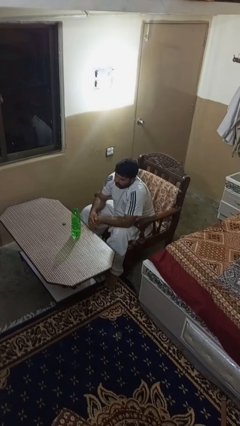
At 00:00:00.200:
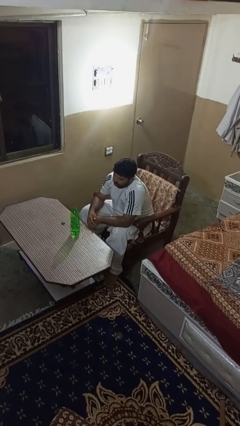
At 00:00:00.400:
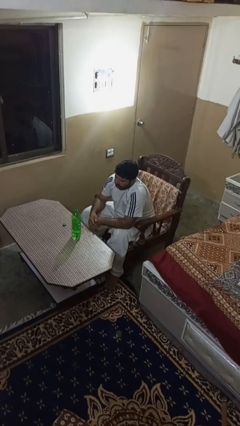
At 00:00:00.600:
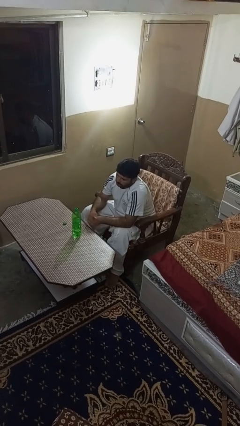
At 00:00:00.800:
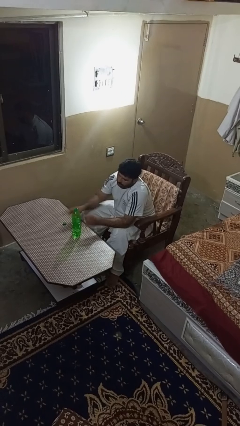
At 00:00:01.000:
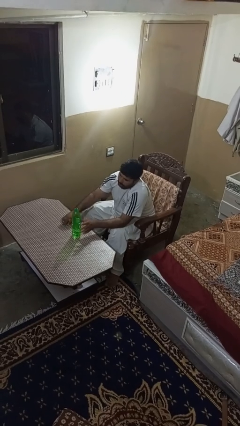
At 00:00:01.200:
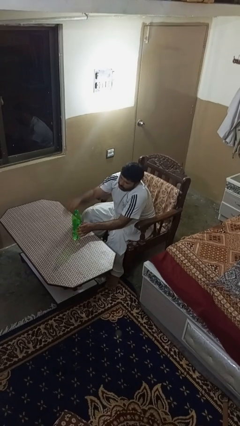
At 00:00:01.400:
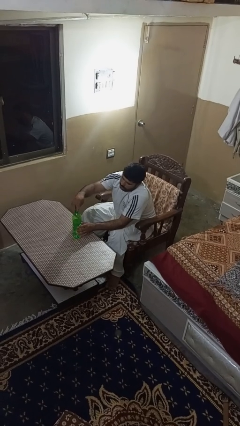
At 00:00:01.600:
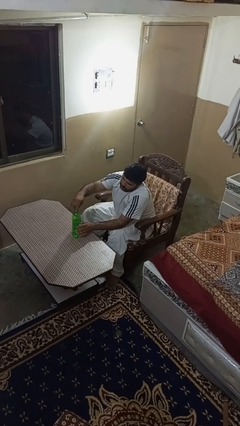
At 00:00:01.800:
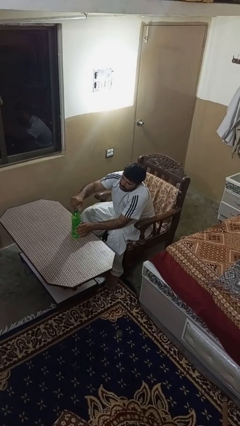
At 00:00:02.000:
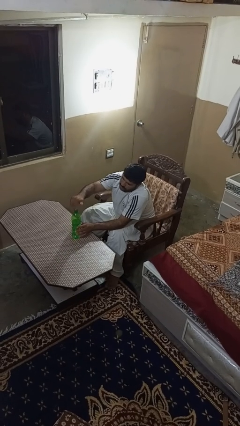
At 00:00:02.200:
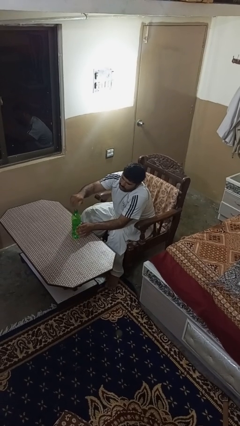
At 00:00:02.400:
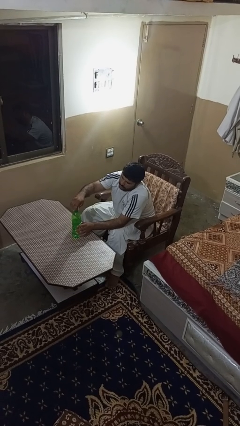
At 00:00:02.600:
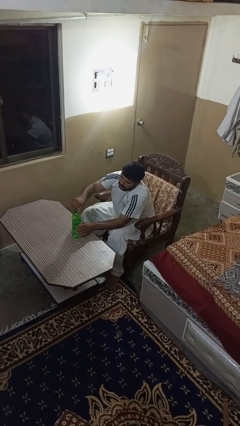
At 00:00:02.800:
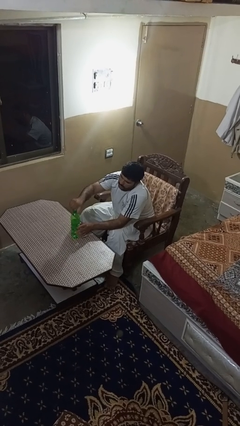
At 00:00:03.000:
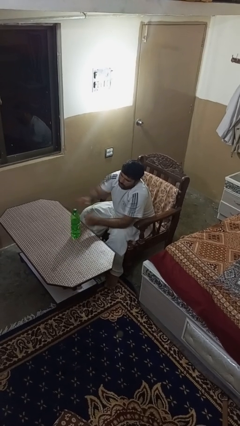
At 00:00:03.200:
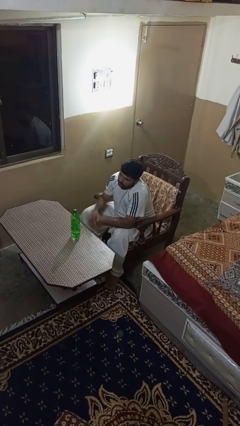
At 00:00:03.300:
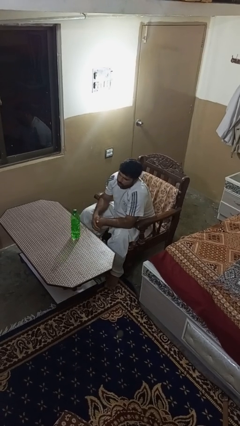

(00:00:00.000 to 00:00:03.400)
person screws lid to bottle

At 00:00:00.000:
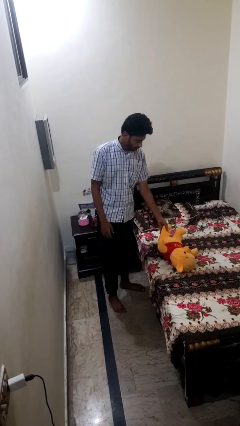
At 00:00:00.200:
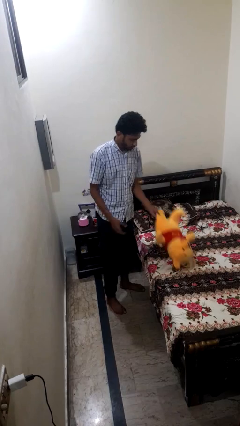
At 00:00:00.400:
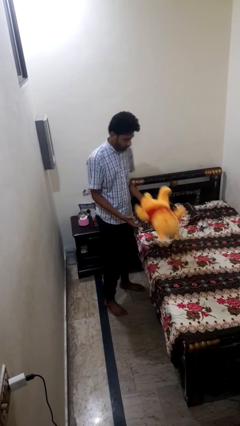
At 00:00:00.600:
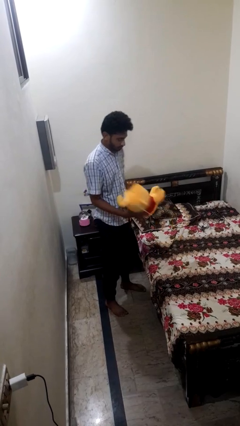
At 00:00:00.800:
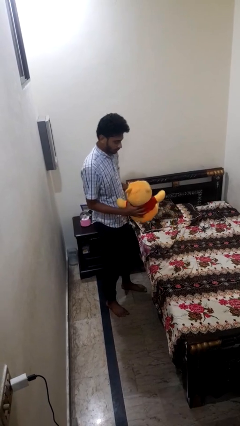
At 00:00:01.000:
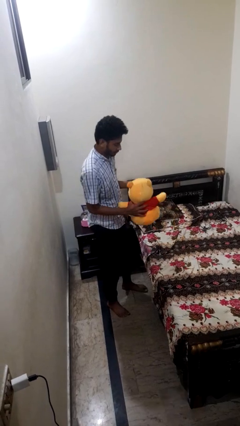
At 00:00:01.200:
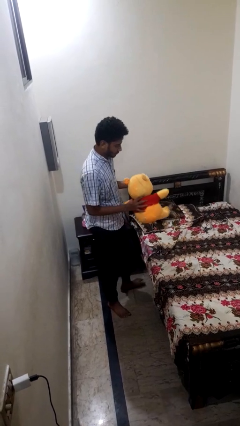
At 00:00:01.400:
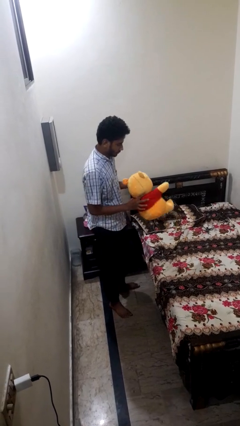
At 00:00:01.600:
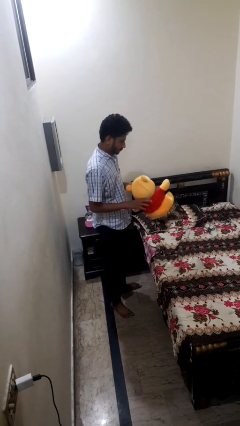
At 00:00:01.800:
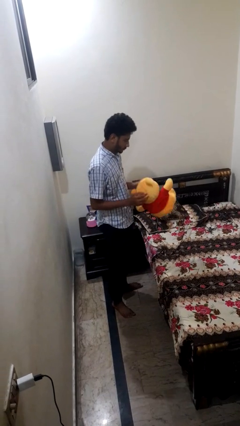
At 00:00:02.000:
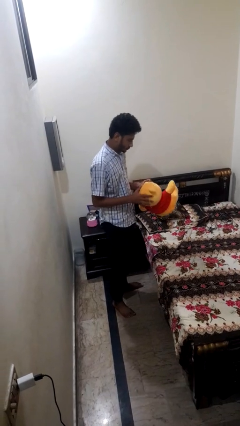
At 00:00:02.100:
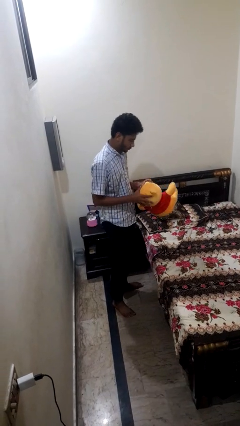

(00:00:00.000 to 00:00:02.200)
person picks up object from bed

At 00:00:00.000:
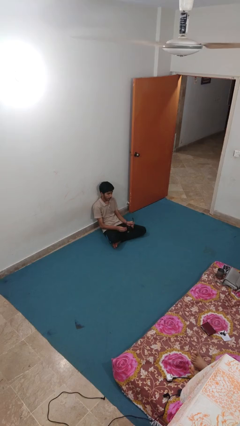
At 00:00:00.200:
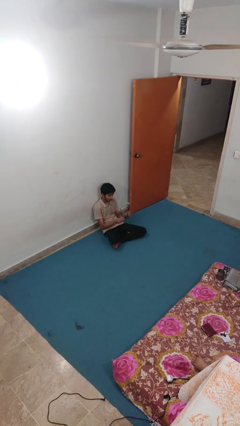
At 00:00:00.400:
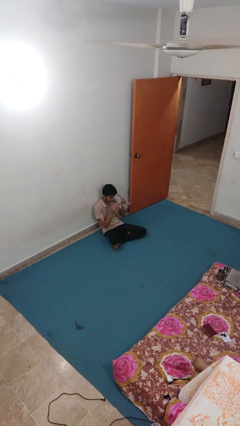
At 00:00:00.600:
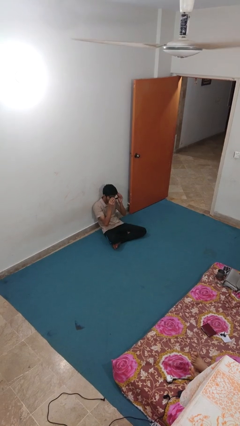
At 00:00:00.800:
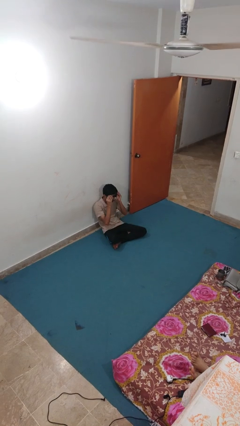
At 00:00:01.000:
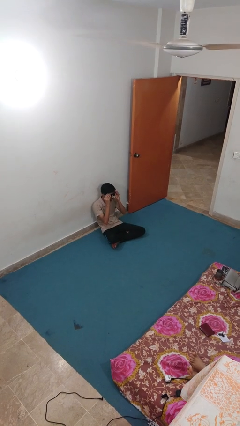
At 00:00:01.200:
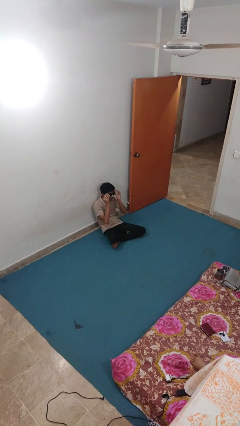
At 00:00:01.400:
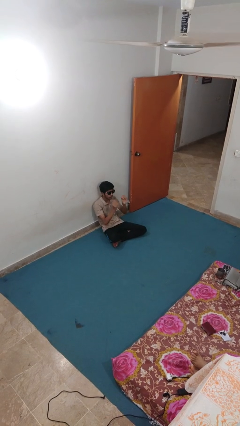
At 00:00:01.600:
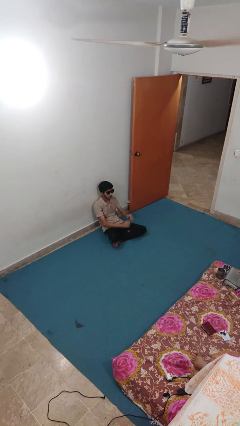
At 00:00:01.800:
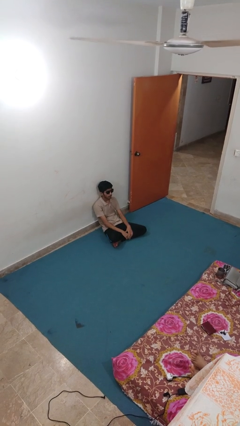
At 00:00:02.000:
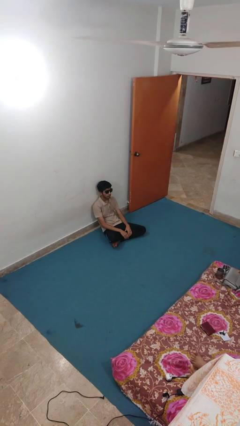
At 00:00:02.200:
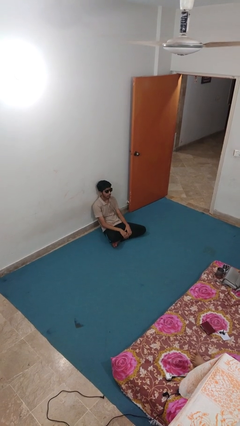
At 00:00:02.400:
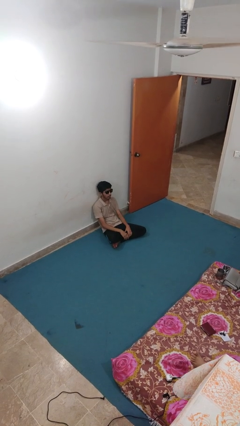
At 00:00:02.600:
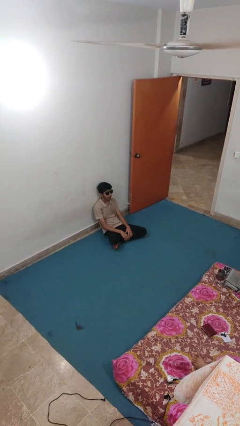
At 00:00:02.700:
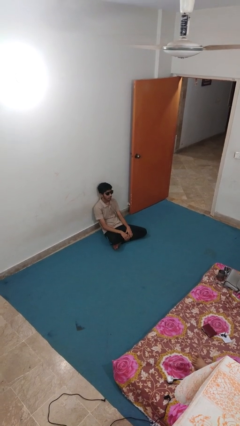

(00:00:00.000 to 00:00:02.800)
person puts on sunglasses

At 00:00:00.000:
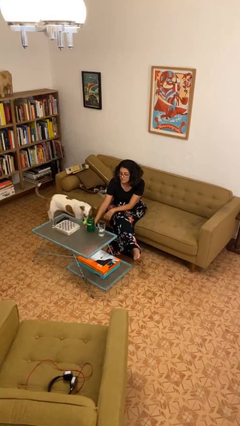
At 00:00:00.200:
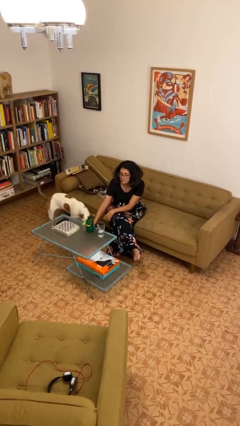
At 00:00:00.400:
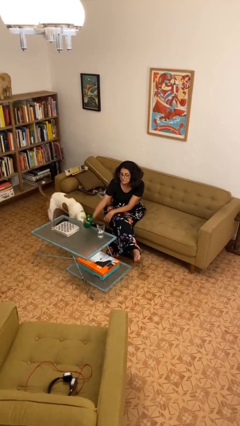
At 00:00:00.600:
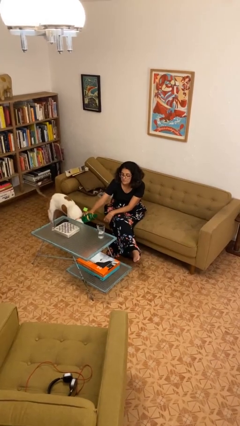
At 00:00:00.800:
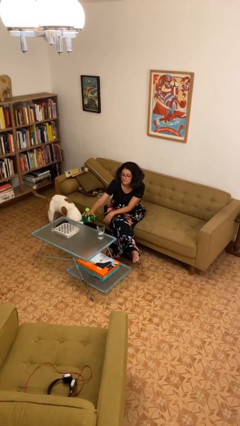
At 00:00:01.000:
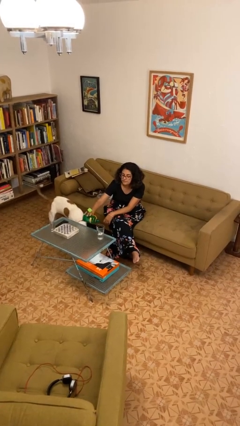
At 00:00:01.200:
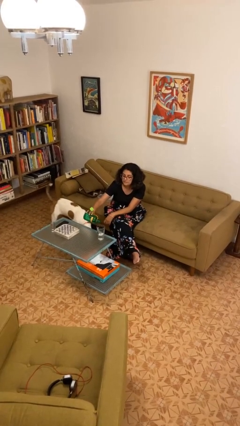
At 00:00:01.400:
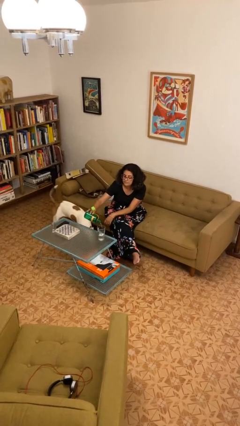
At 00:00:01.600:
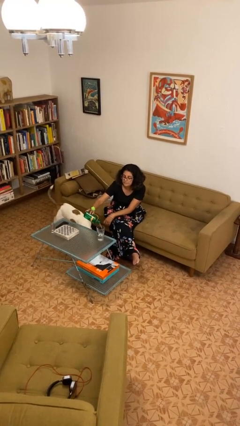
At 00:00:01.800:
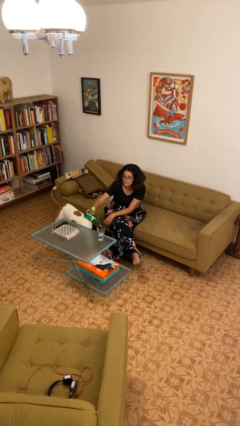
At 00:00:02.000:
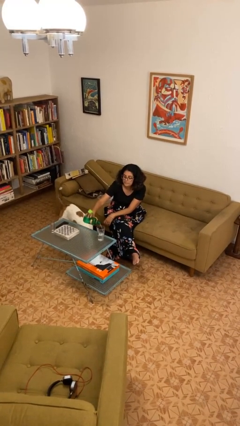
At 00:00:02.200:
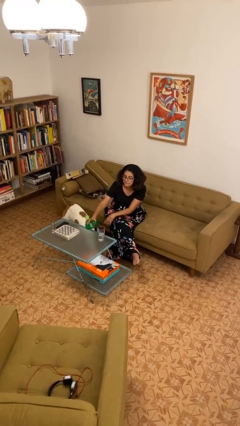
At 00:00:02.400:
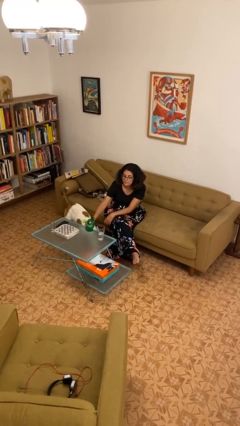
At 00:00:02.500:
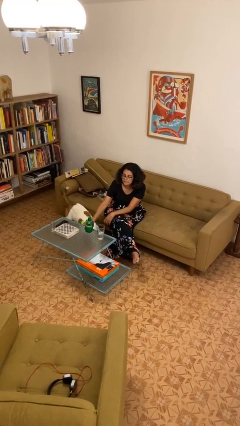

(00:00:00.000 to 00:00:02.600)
person pours liquid into cup

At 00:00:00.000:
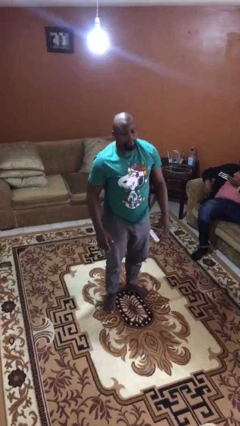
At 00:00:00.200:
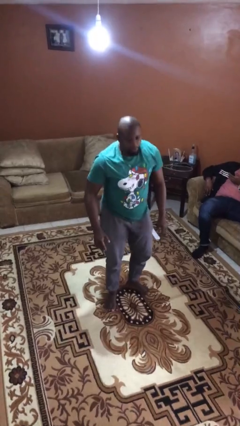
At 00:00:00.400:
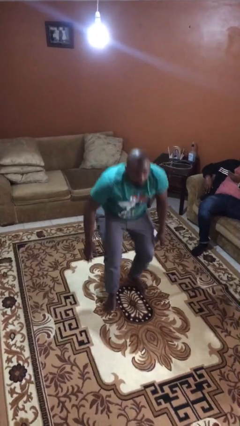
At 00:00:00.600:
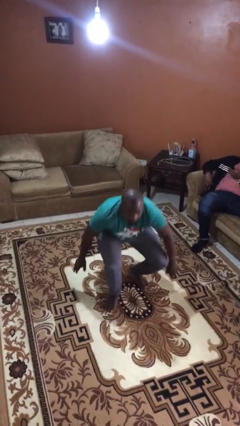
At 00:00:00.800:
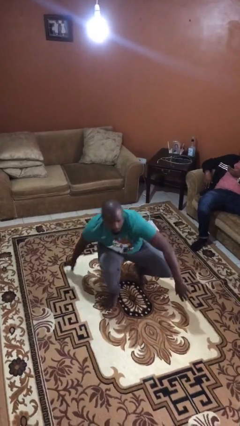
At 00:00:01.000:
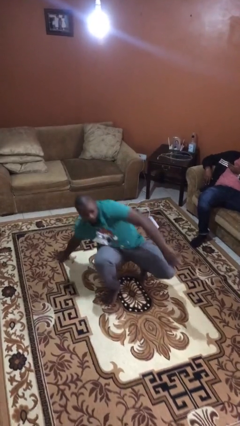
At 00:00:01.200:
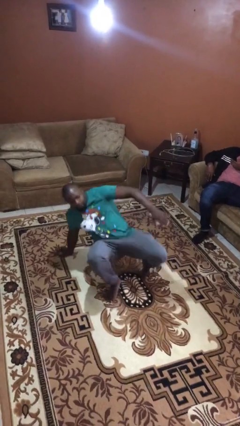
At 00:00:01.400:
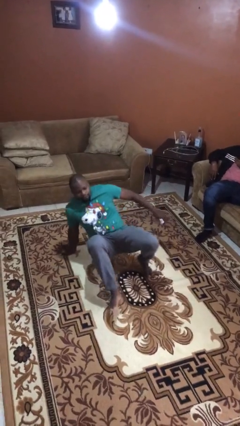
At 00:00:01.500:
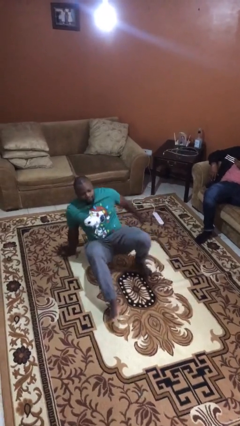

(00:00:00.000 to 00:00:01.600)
person sits down

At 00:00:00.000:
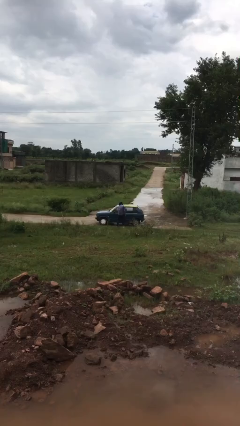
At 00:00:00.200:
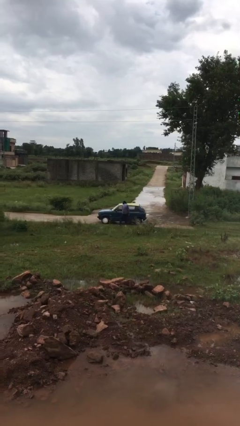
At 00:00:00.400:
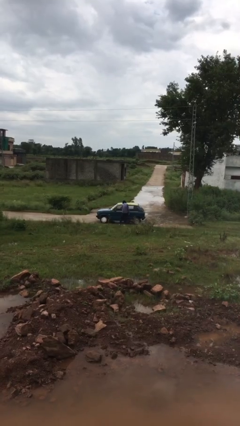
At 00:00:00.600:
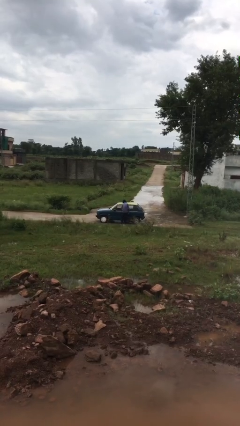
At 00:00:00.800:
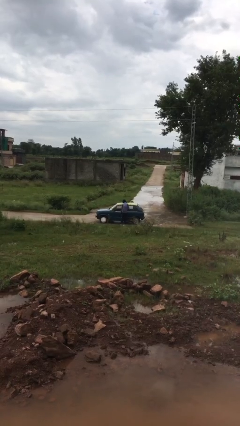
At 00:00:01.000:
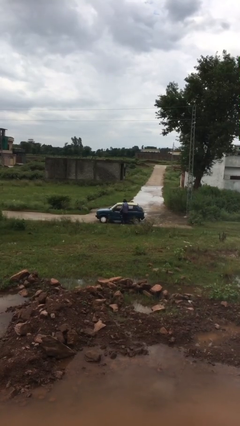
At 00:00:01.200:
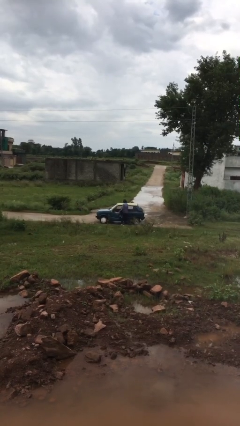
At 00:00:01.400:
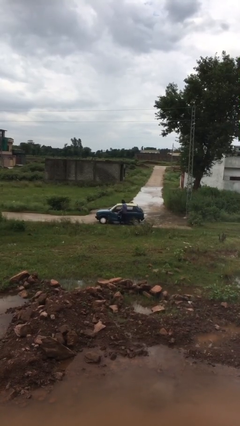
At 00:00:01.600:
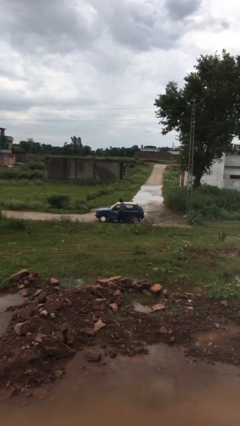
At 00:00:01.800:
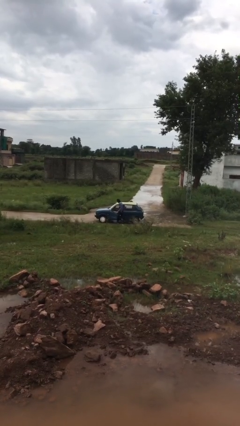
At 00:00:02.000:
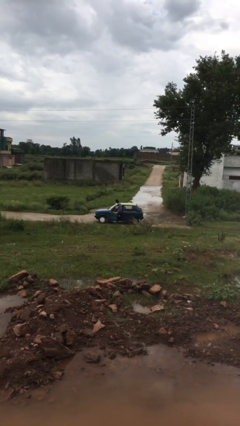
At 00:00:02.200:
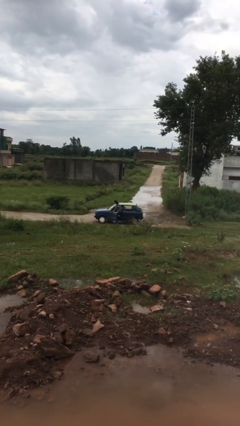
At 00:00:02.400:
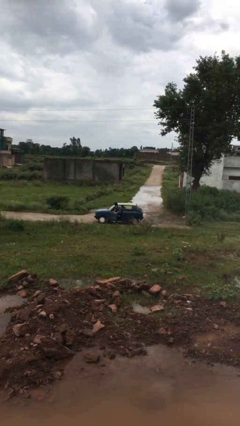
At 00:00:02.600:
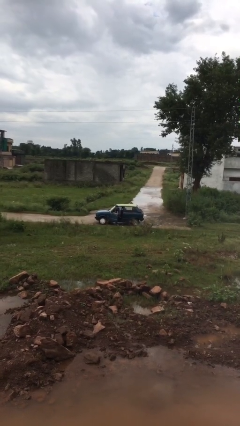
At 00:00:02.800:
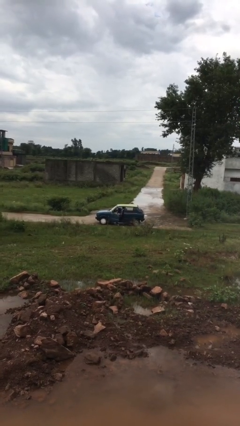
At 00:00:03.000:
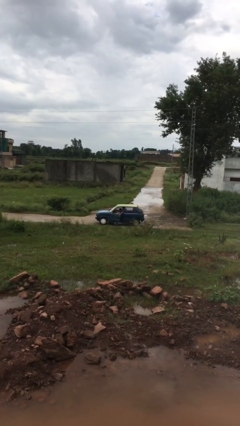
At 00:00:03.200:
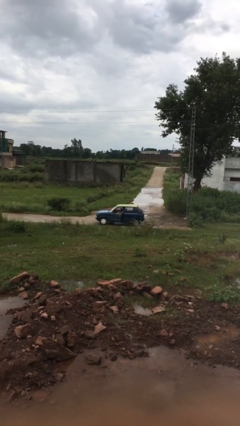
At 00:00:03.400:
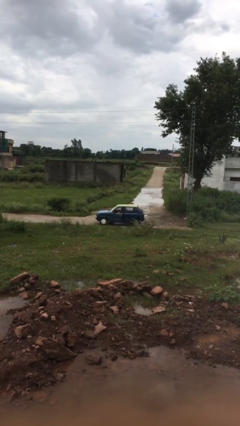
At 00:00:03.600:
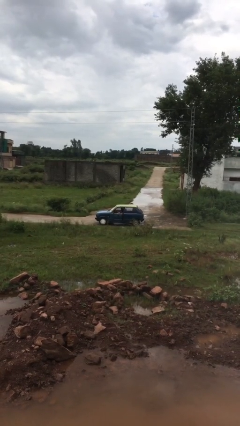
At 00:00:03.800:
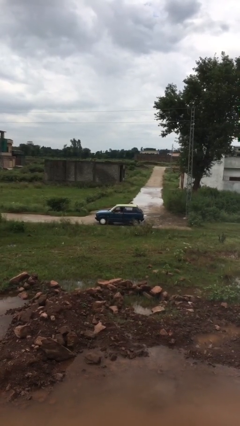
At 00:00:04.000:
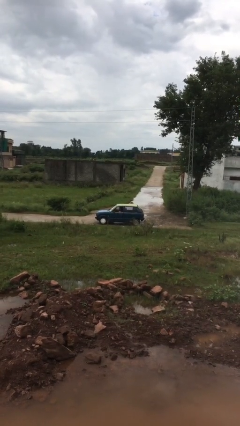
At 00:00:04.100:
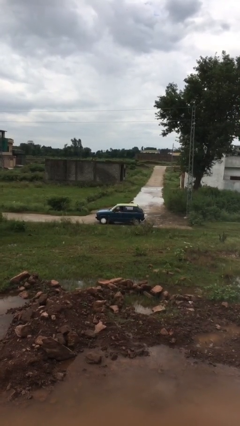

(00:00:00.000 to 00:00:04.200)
car picks up person

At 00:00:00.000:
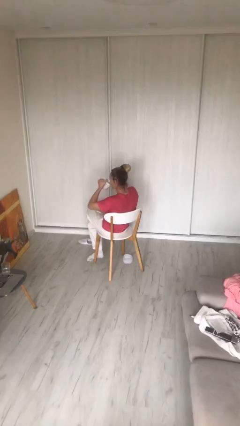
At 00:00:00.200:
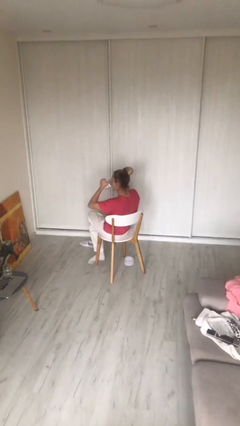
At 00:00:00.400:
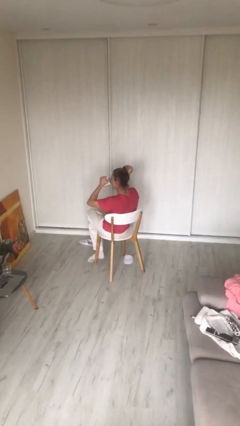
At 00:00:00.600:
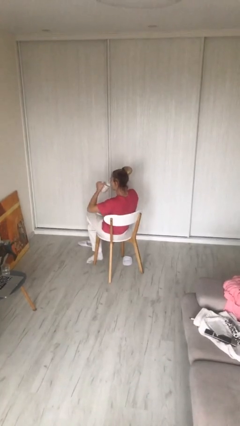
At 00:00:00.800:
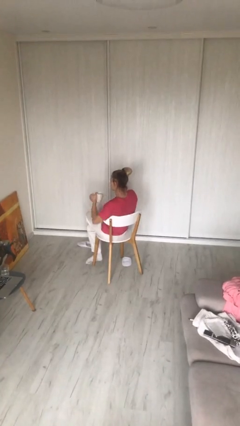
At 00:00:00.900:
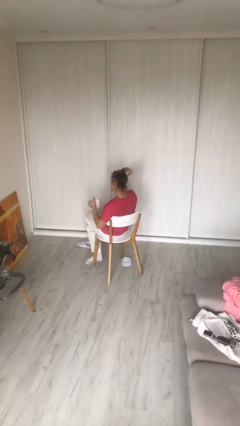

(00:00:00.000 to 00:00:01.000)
person drinks from mug
